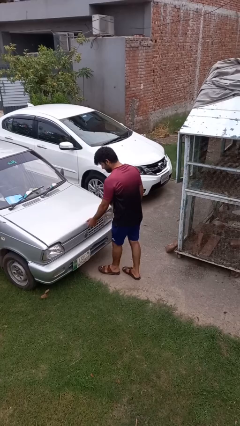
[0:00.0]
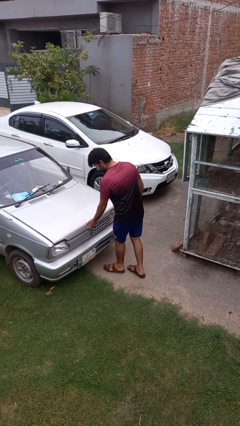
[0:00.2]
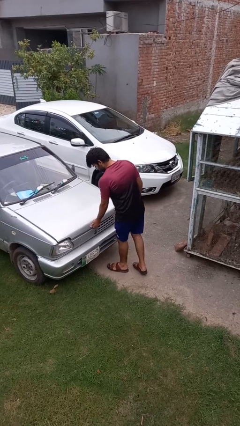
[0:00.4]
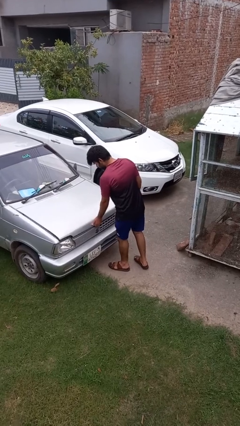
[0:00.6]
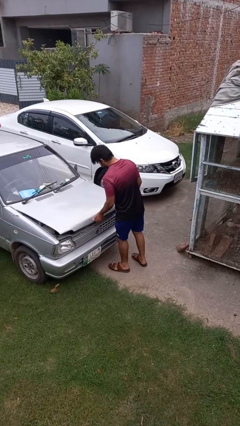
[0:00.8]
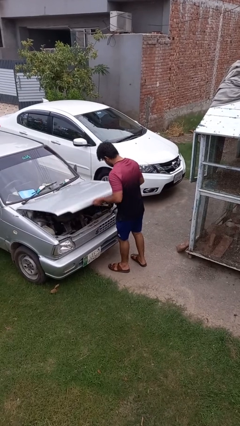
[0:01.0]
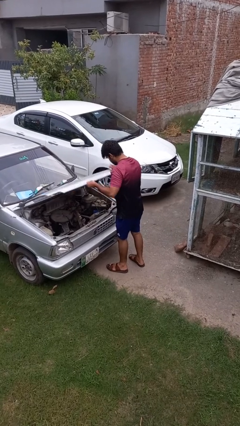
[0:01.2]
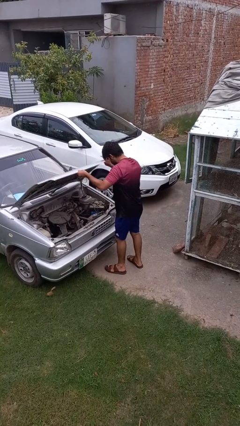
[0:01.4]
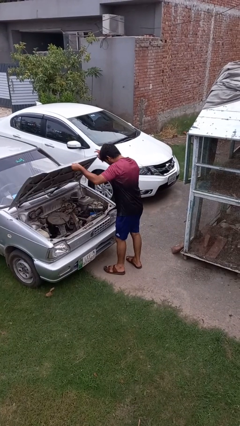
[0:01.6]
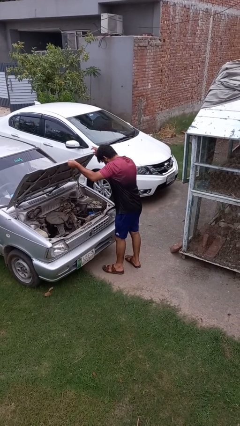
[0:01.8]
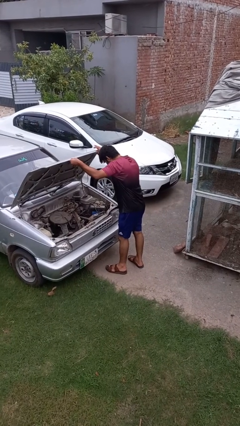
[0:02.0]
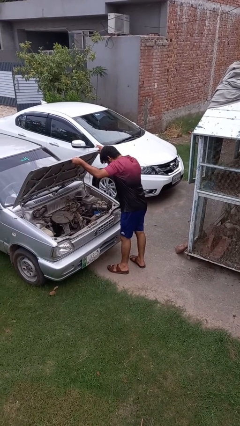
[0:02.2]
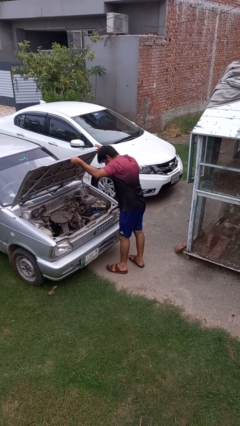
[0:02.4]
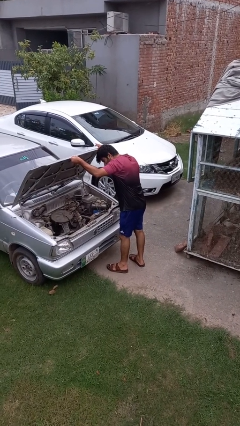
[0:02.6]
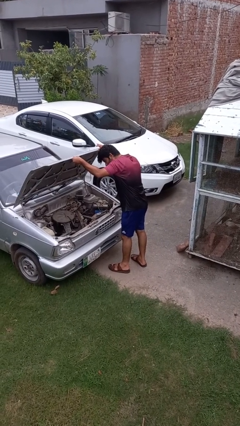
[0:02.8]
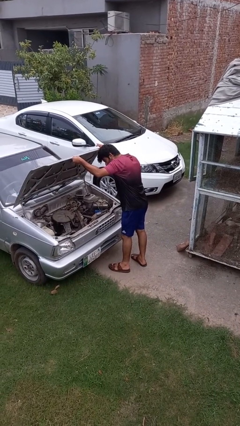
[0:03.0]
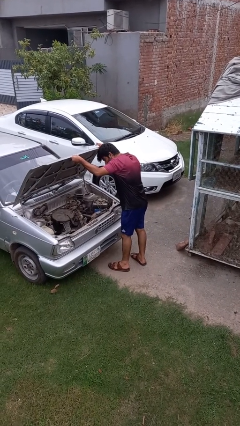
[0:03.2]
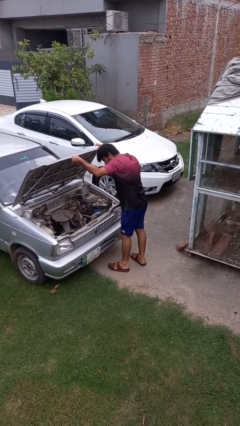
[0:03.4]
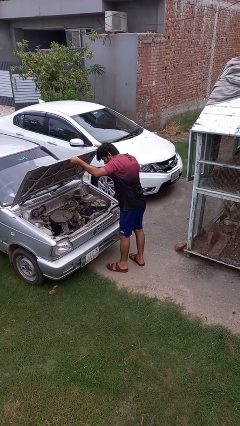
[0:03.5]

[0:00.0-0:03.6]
person opens car hood

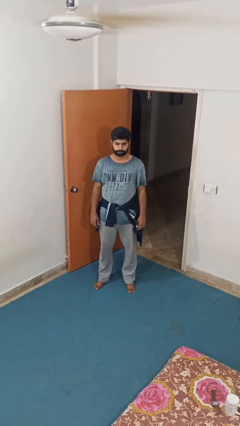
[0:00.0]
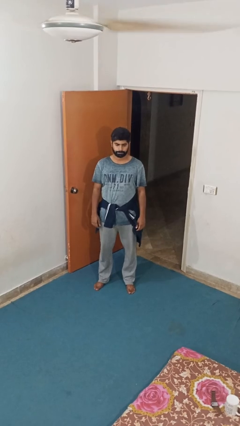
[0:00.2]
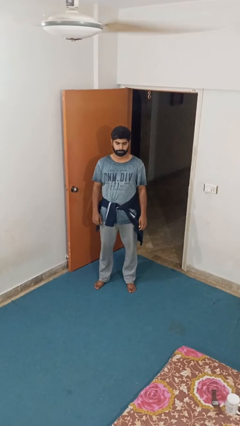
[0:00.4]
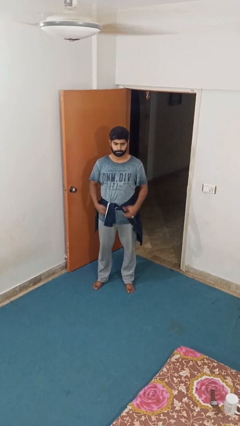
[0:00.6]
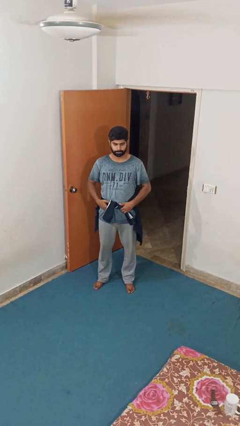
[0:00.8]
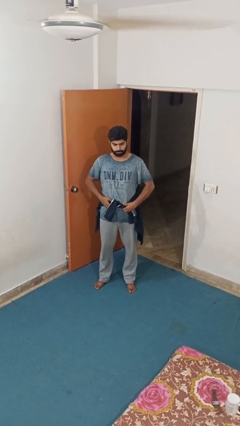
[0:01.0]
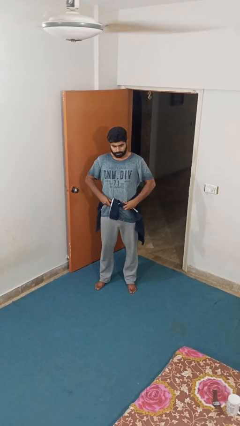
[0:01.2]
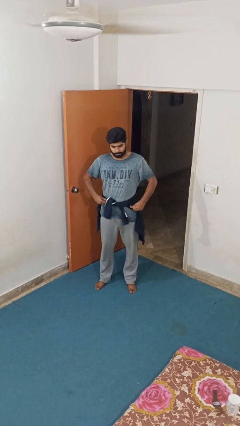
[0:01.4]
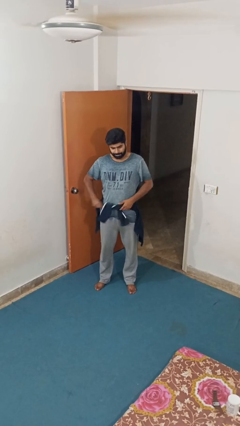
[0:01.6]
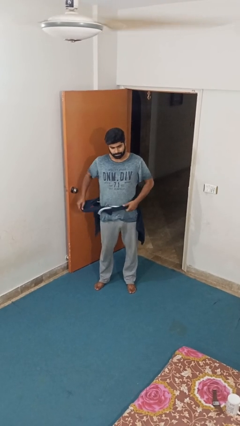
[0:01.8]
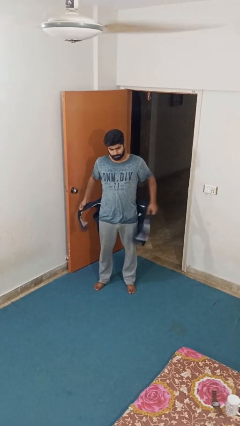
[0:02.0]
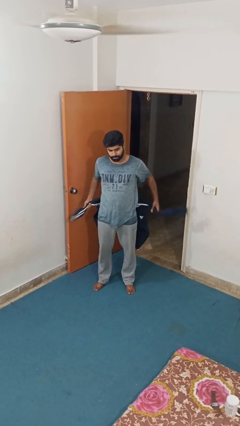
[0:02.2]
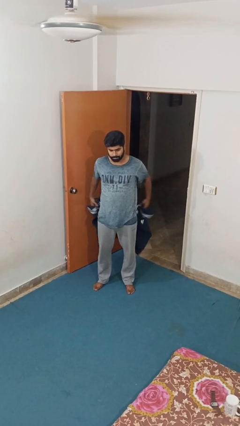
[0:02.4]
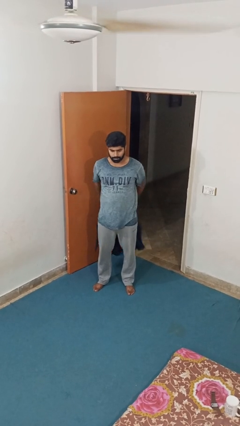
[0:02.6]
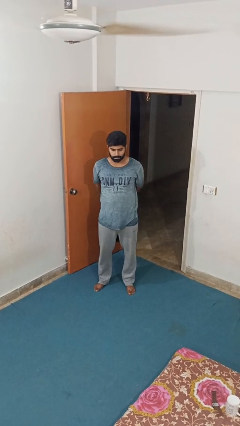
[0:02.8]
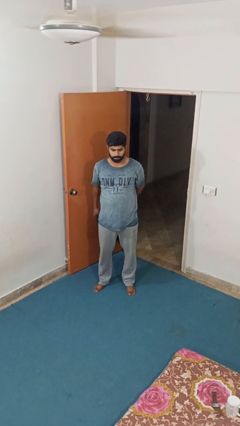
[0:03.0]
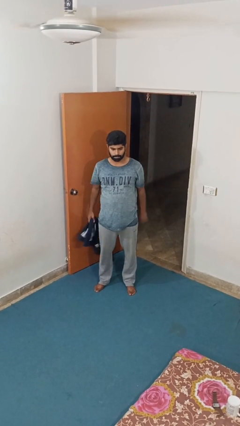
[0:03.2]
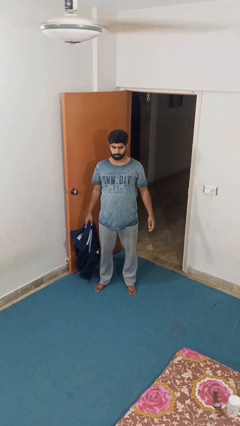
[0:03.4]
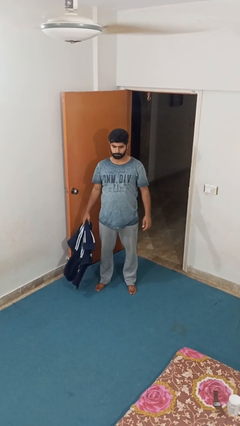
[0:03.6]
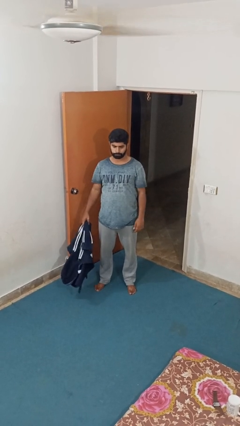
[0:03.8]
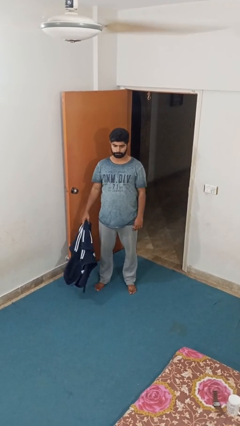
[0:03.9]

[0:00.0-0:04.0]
person unties jacket around waist

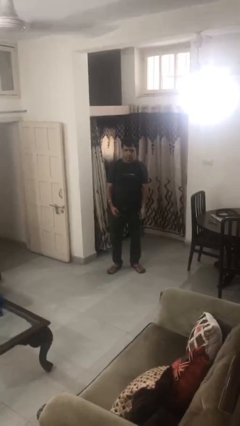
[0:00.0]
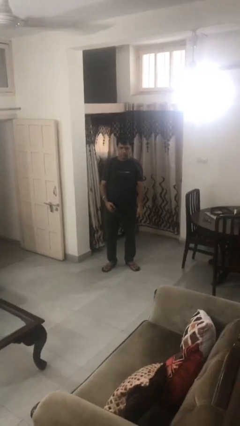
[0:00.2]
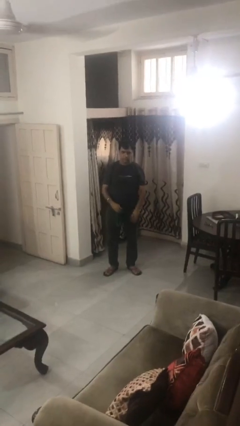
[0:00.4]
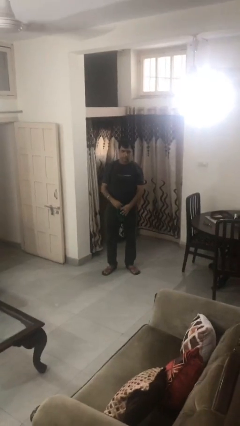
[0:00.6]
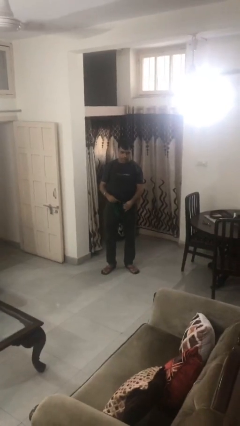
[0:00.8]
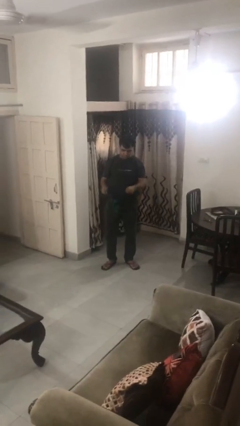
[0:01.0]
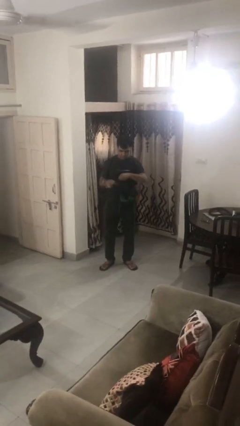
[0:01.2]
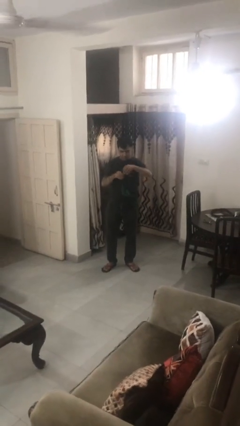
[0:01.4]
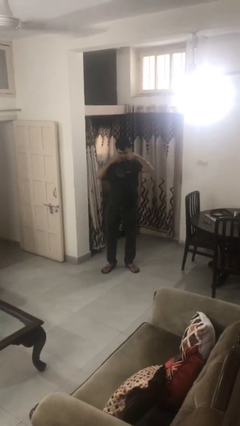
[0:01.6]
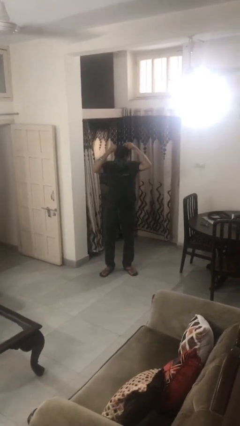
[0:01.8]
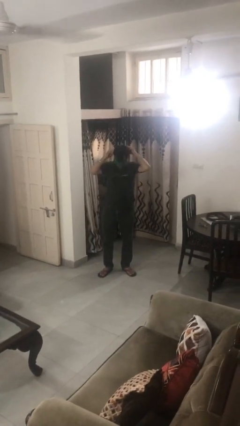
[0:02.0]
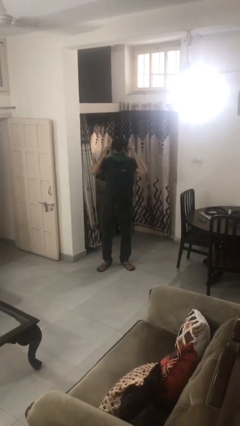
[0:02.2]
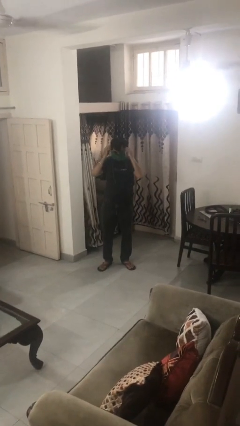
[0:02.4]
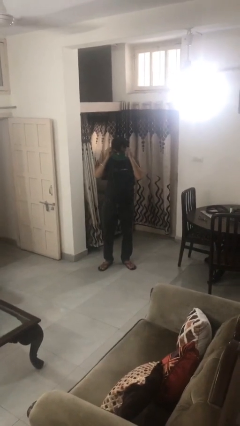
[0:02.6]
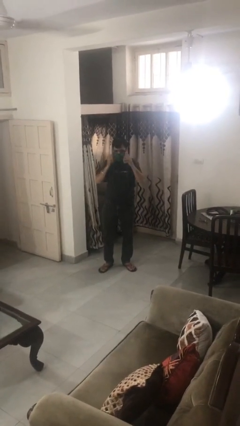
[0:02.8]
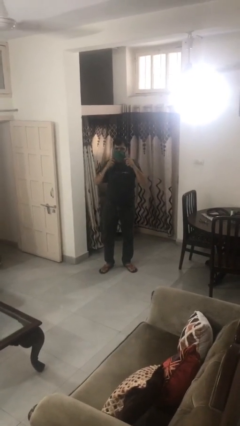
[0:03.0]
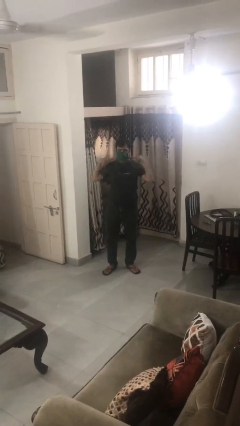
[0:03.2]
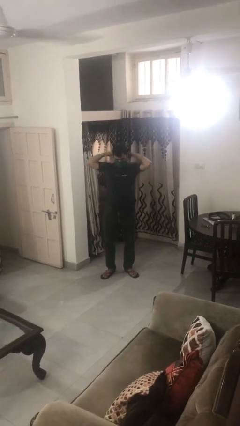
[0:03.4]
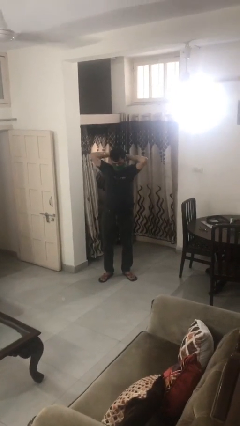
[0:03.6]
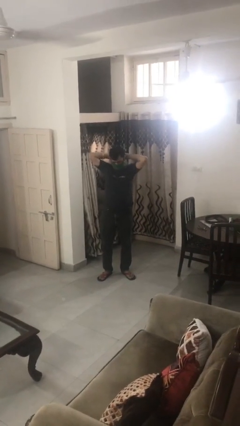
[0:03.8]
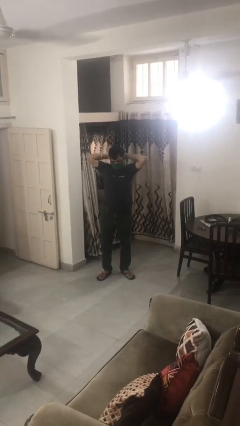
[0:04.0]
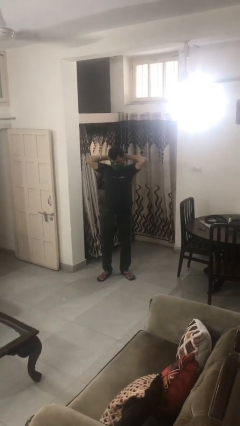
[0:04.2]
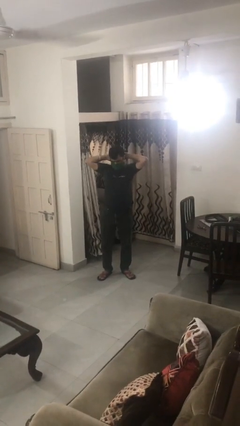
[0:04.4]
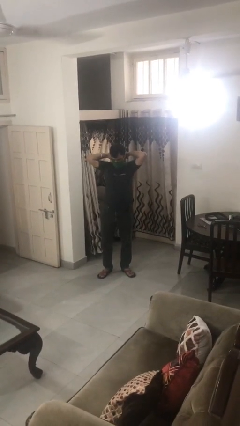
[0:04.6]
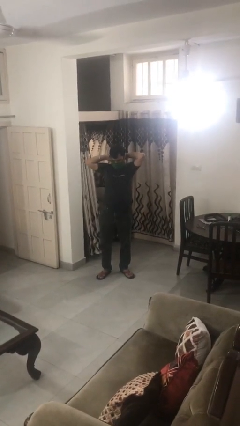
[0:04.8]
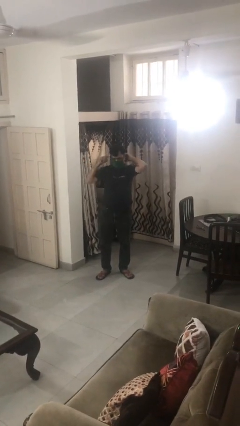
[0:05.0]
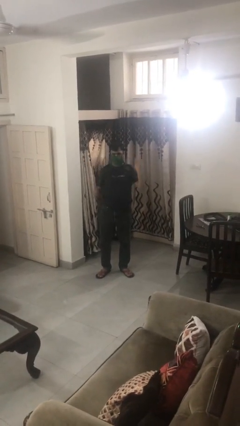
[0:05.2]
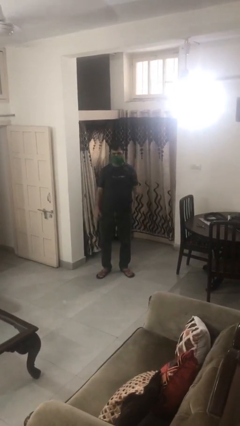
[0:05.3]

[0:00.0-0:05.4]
person puts on facemask

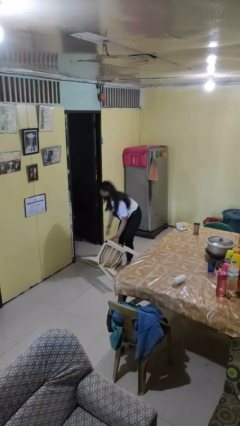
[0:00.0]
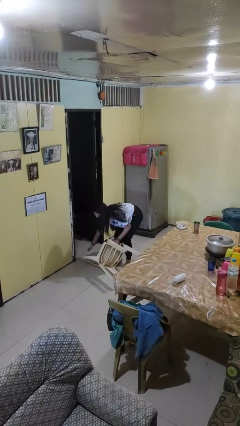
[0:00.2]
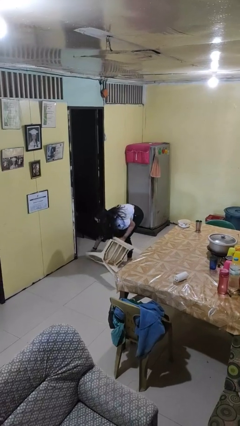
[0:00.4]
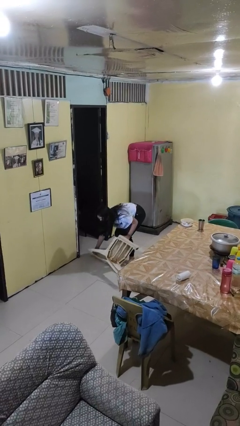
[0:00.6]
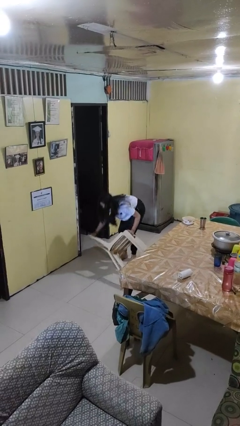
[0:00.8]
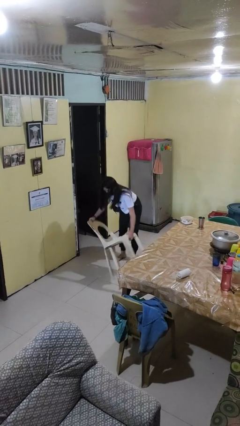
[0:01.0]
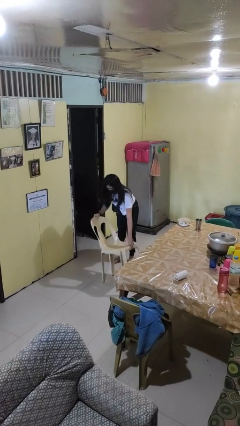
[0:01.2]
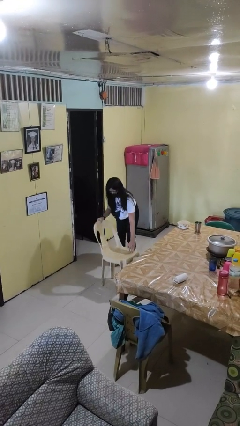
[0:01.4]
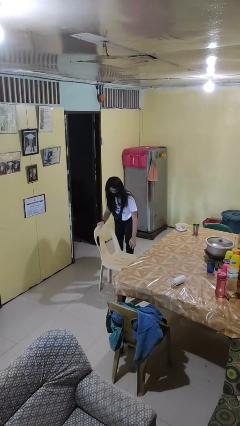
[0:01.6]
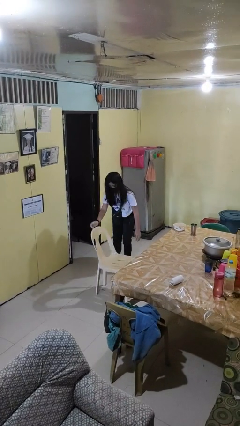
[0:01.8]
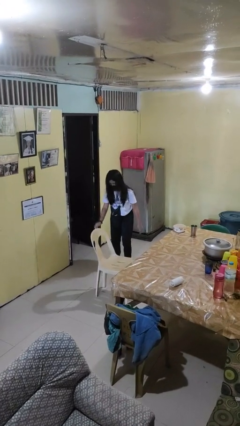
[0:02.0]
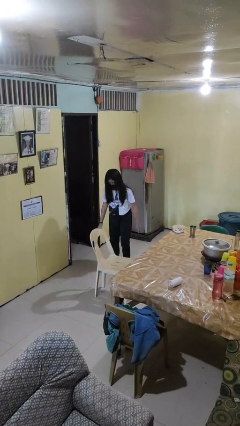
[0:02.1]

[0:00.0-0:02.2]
person sets upright furniture

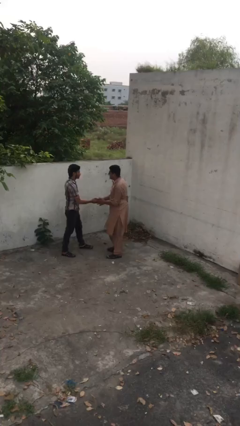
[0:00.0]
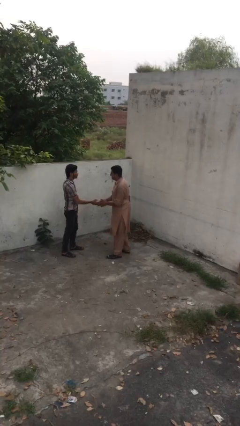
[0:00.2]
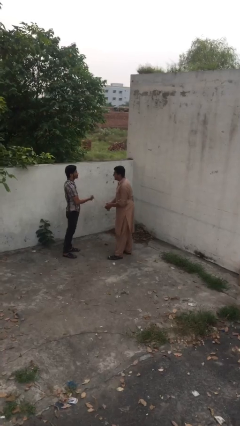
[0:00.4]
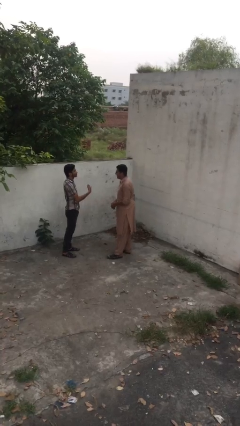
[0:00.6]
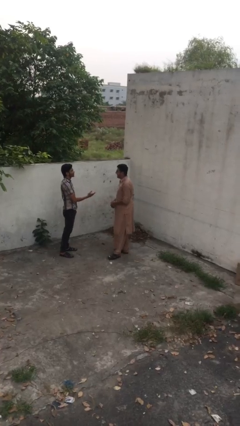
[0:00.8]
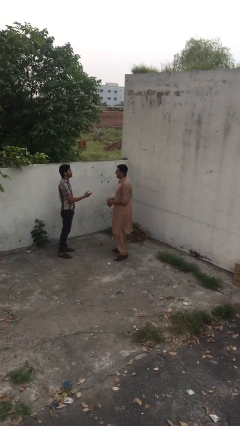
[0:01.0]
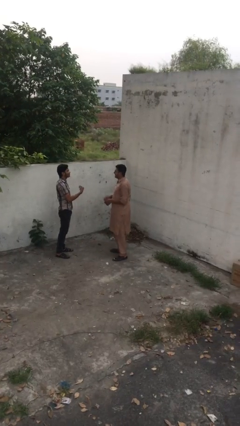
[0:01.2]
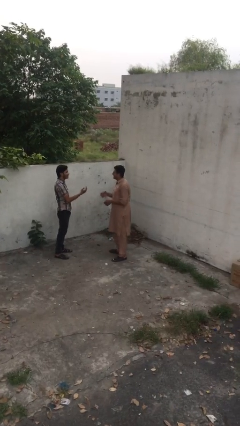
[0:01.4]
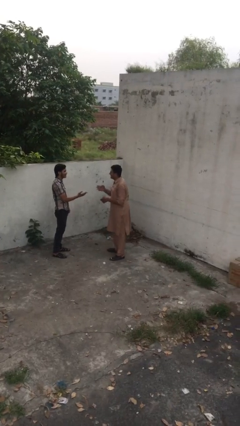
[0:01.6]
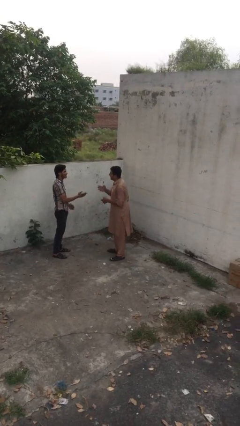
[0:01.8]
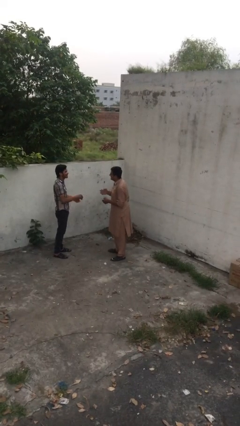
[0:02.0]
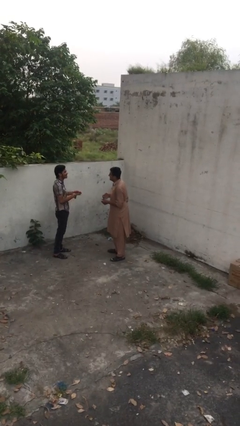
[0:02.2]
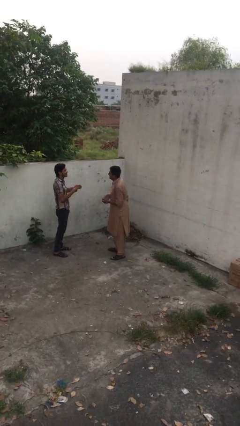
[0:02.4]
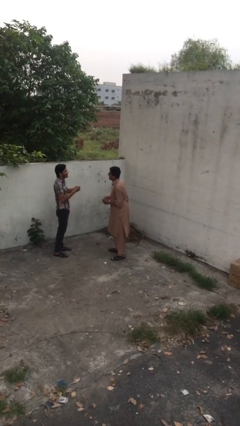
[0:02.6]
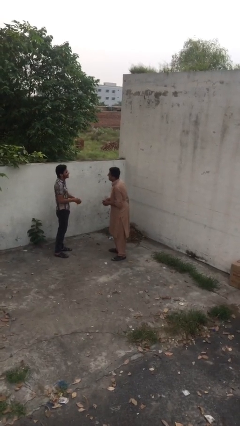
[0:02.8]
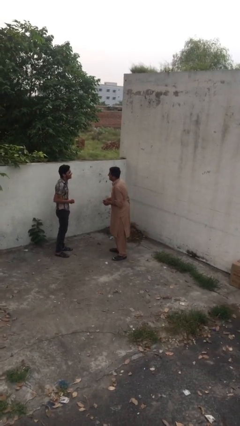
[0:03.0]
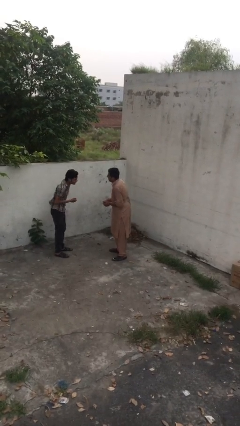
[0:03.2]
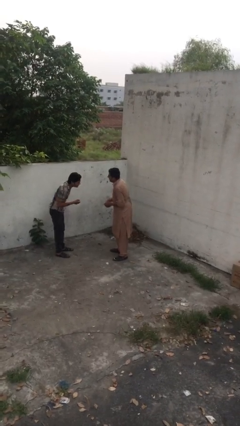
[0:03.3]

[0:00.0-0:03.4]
person talks to person
